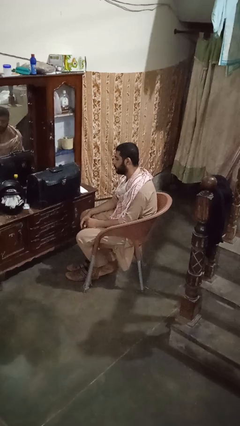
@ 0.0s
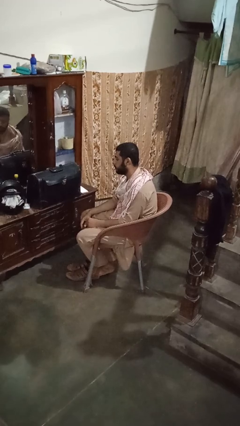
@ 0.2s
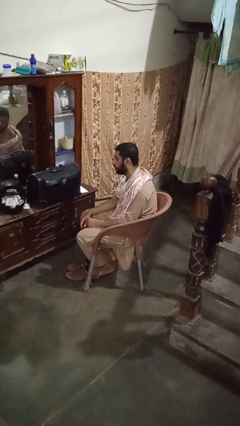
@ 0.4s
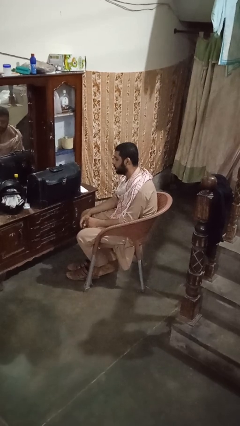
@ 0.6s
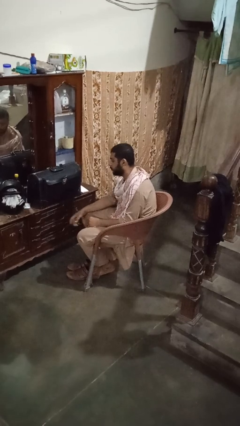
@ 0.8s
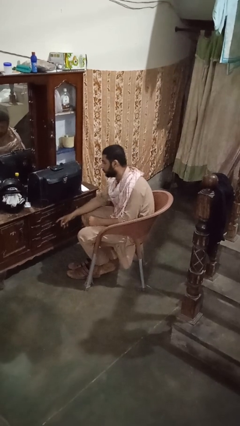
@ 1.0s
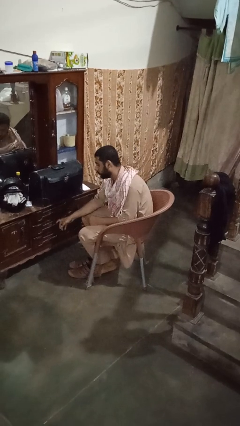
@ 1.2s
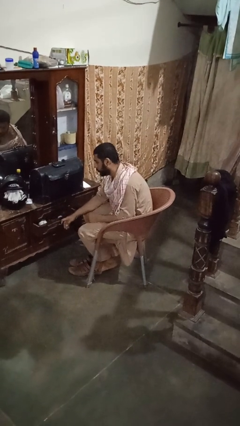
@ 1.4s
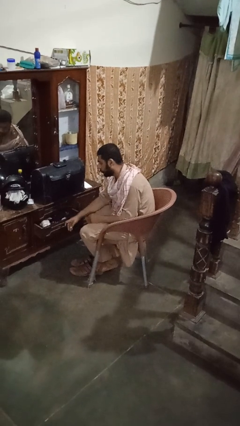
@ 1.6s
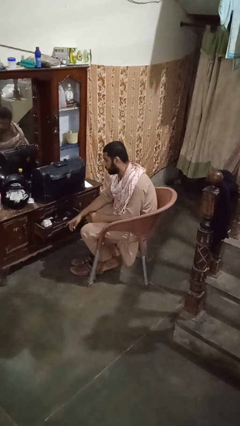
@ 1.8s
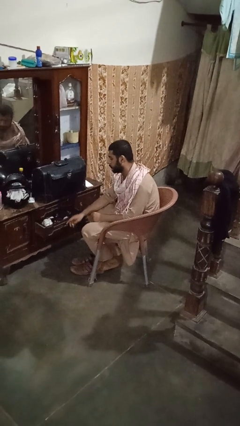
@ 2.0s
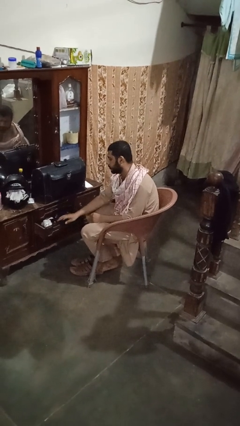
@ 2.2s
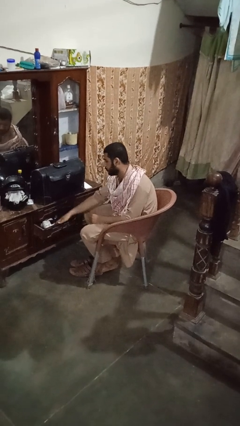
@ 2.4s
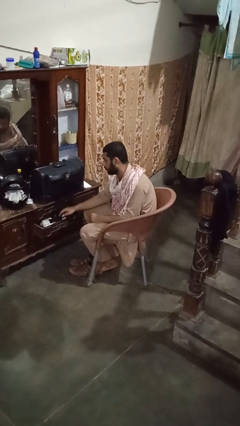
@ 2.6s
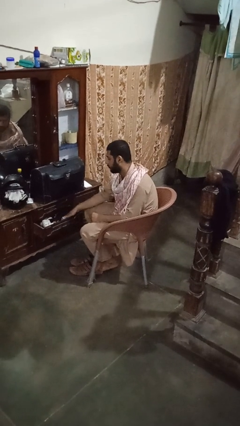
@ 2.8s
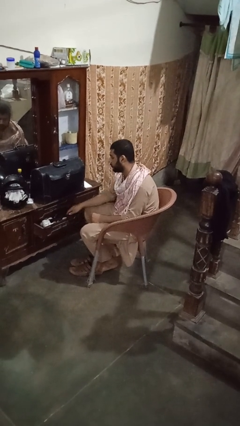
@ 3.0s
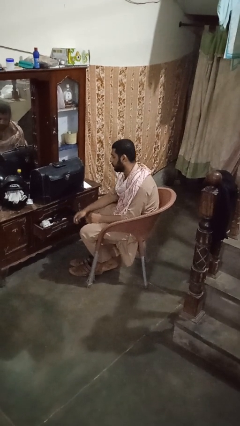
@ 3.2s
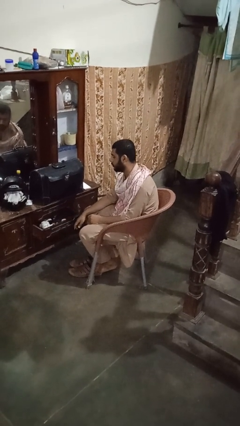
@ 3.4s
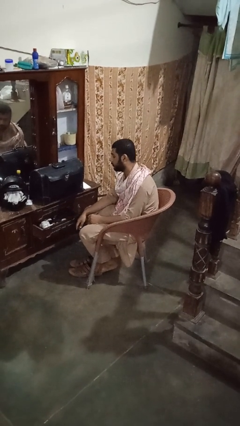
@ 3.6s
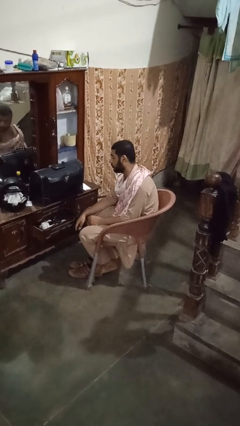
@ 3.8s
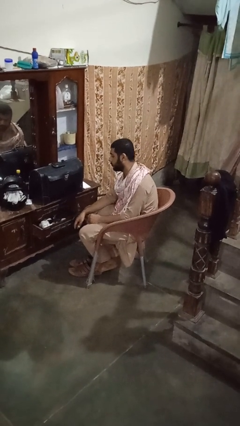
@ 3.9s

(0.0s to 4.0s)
person opens dresser drawer

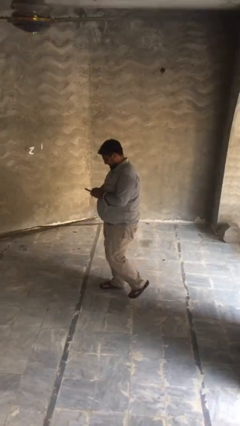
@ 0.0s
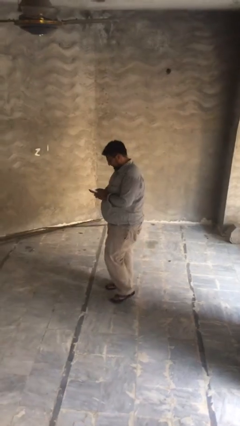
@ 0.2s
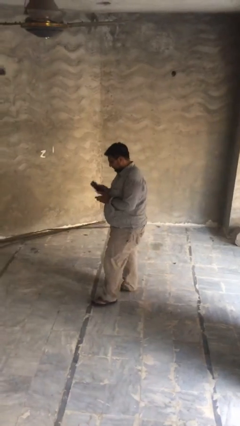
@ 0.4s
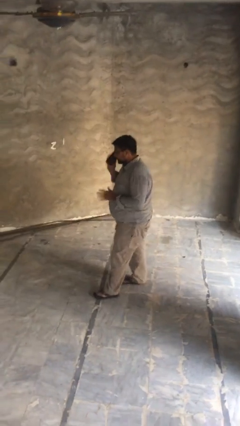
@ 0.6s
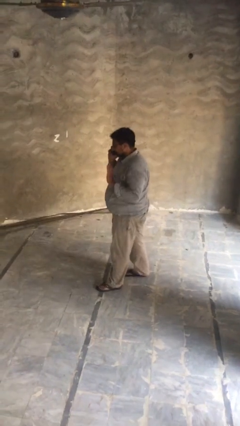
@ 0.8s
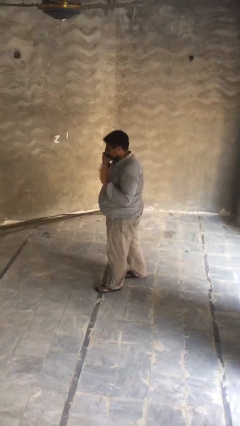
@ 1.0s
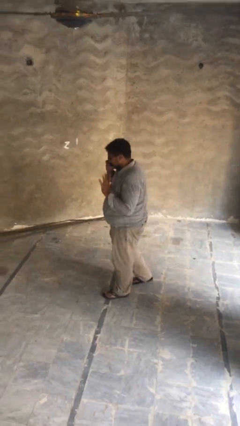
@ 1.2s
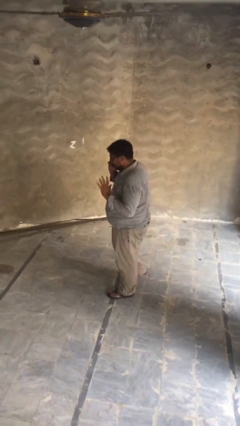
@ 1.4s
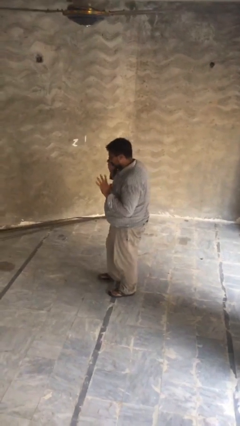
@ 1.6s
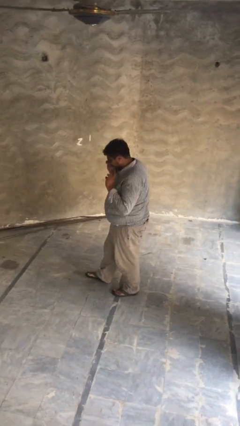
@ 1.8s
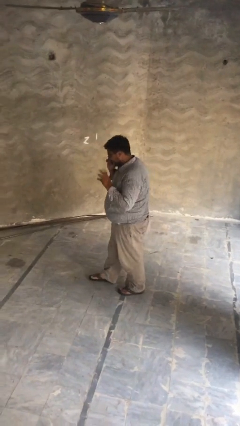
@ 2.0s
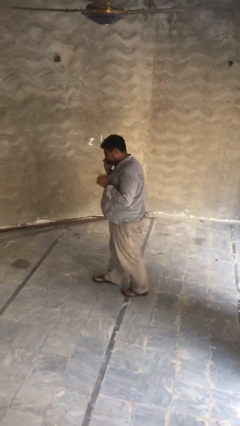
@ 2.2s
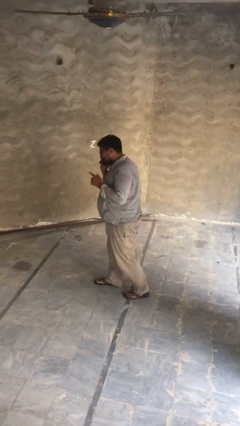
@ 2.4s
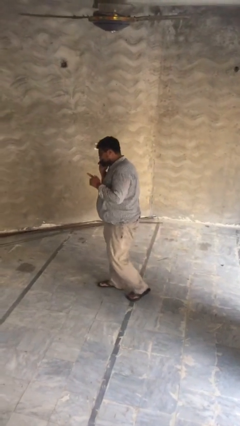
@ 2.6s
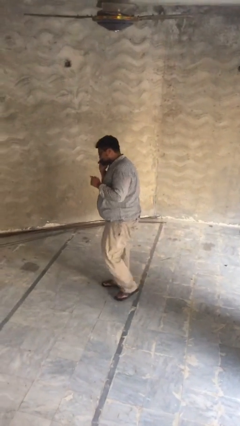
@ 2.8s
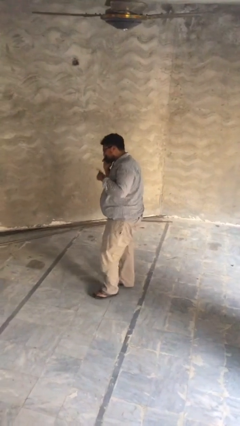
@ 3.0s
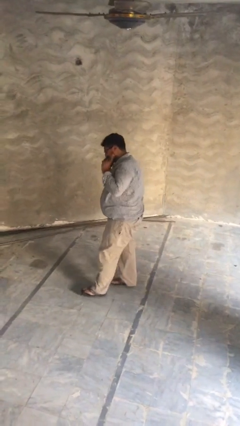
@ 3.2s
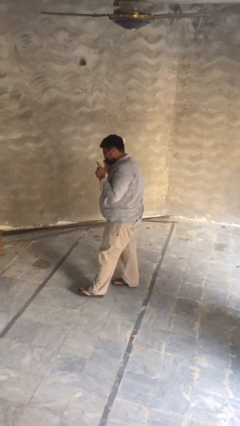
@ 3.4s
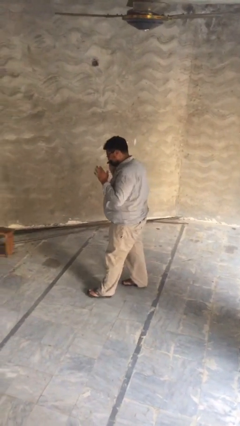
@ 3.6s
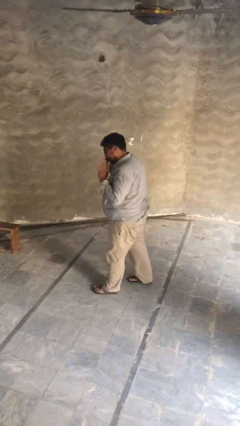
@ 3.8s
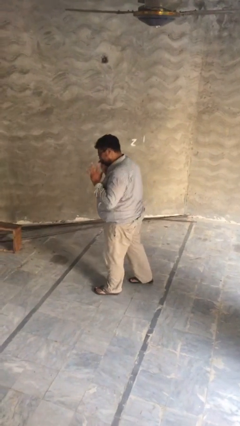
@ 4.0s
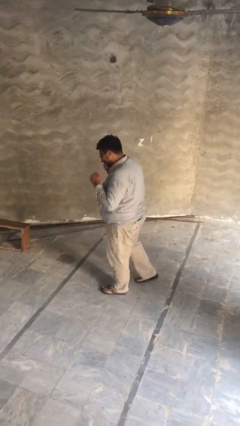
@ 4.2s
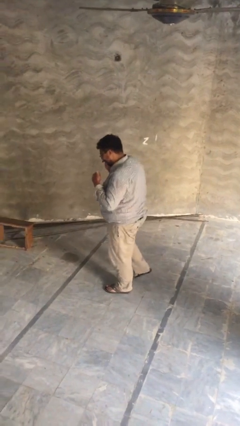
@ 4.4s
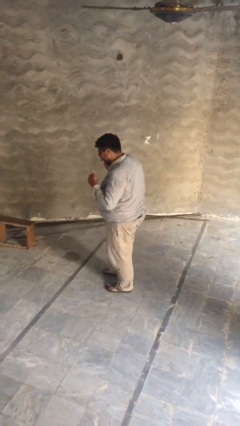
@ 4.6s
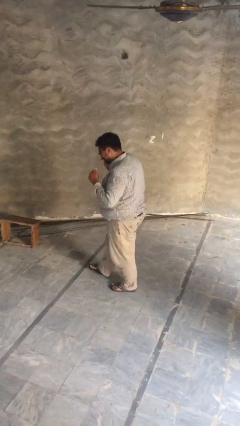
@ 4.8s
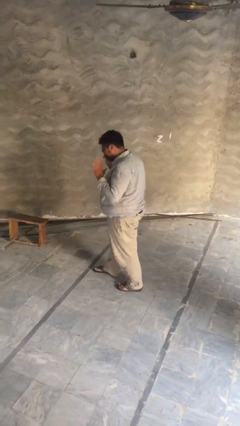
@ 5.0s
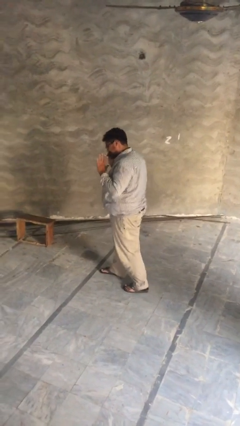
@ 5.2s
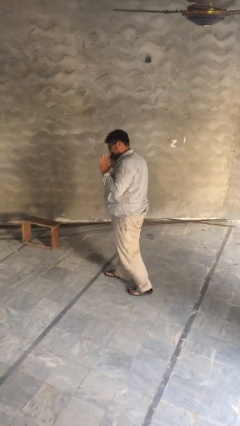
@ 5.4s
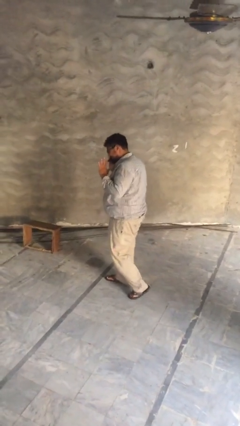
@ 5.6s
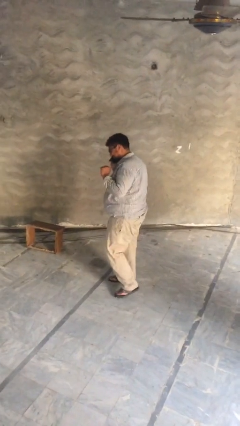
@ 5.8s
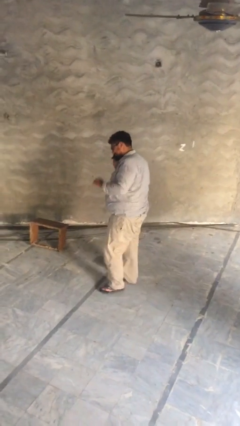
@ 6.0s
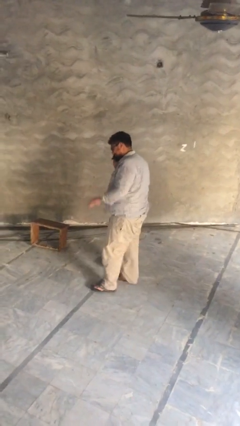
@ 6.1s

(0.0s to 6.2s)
person talks on phone

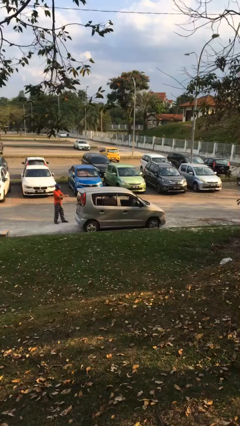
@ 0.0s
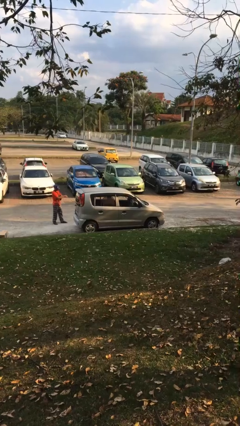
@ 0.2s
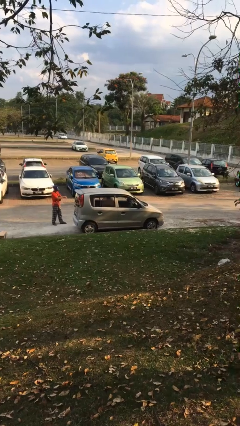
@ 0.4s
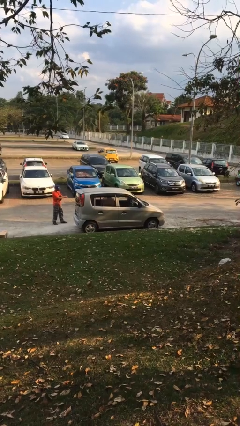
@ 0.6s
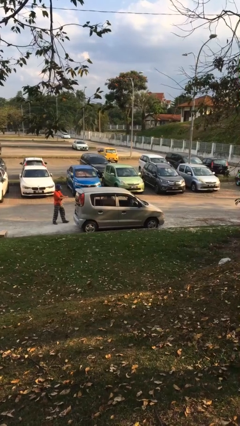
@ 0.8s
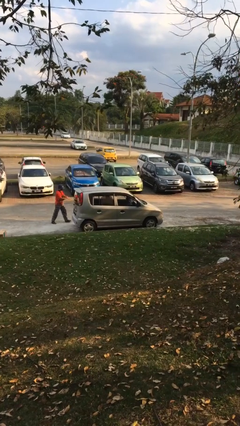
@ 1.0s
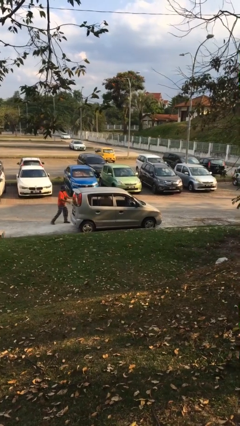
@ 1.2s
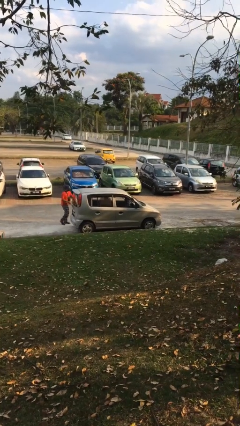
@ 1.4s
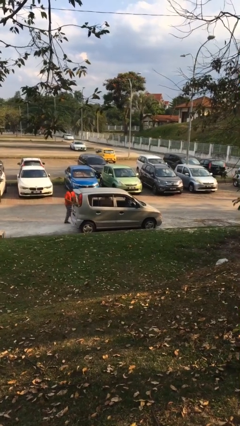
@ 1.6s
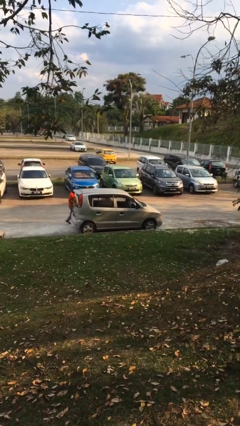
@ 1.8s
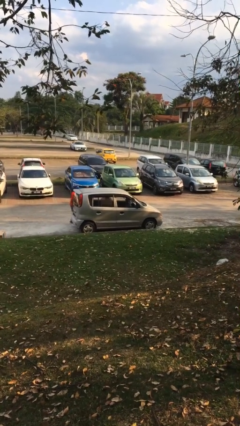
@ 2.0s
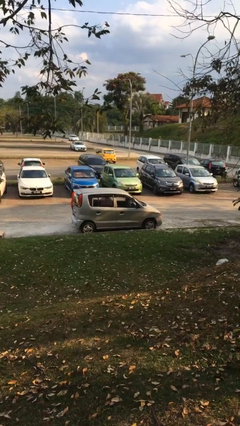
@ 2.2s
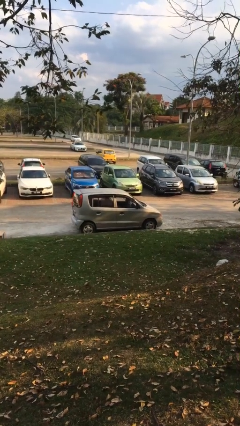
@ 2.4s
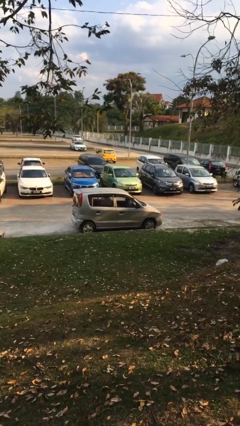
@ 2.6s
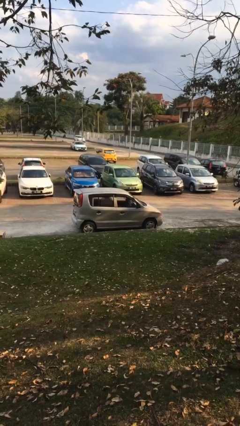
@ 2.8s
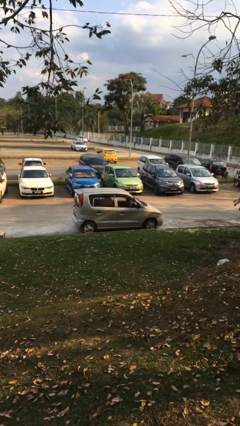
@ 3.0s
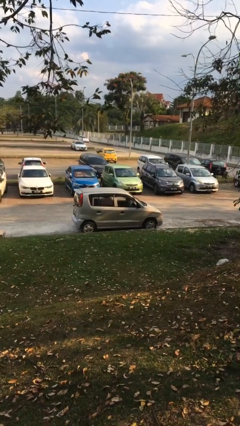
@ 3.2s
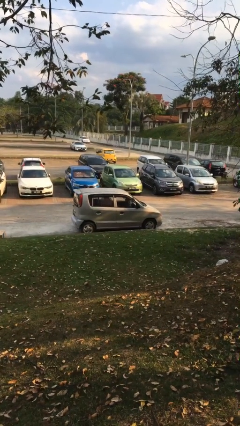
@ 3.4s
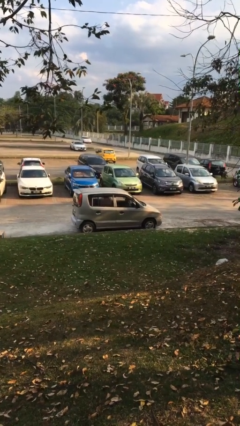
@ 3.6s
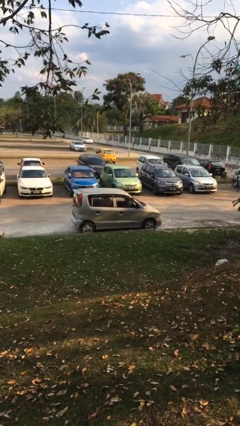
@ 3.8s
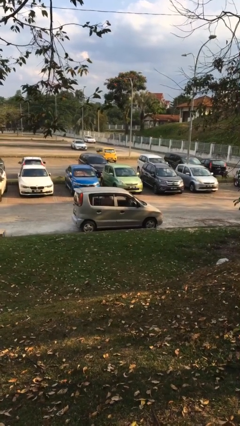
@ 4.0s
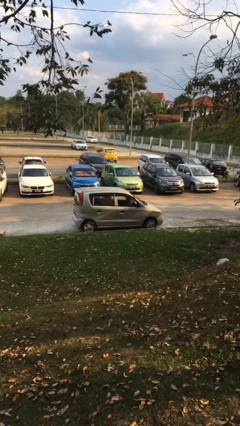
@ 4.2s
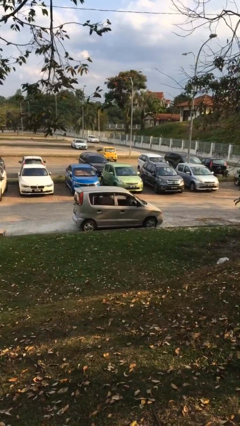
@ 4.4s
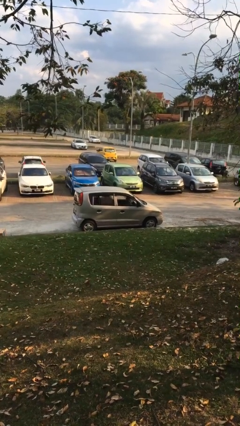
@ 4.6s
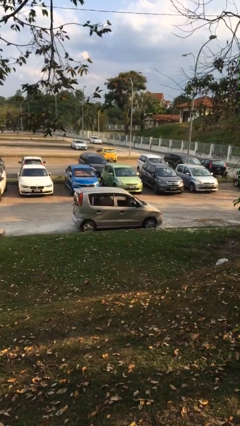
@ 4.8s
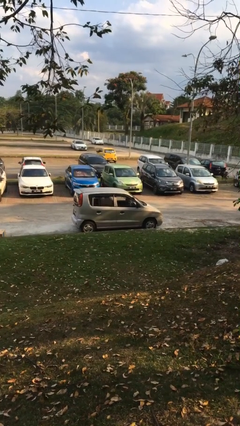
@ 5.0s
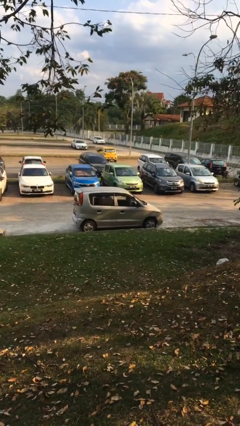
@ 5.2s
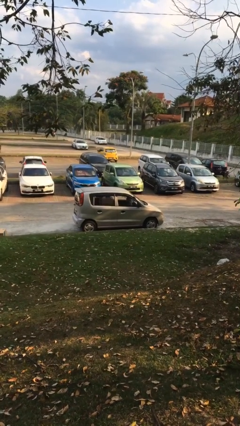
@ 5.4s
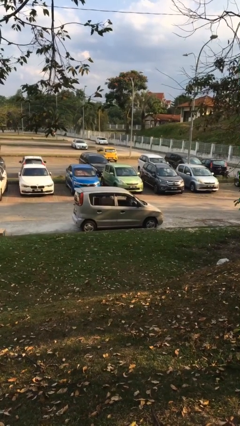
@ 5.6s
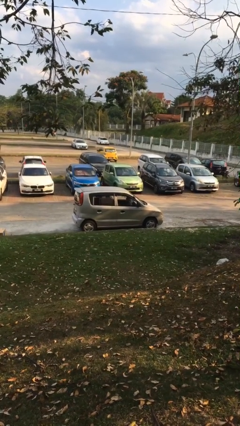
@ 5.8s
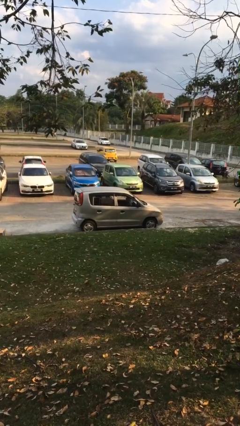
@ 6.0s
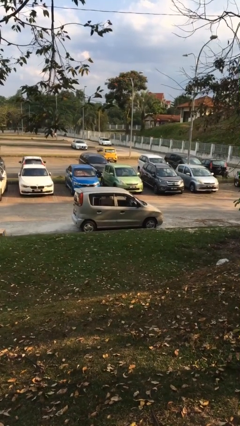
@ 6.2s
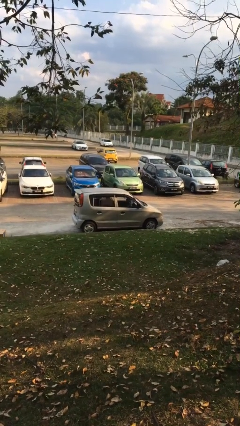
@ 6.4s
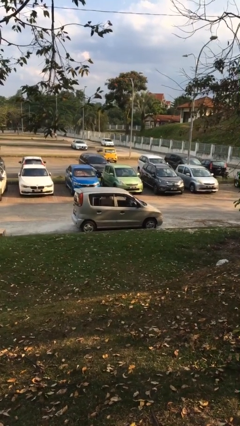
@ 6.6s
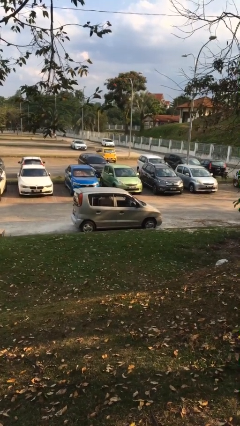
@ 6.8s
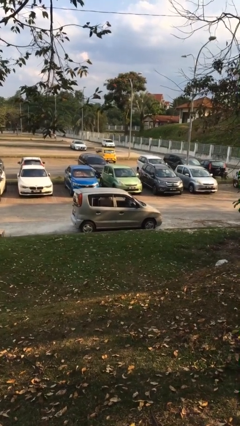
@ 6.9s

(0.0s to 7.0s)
car picks up person

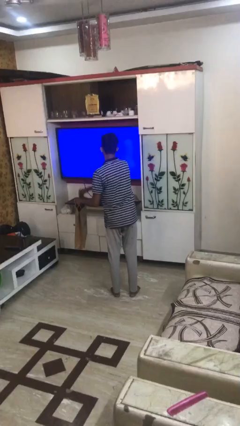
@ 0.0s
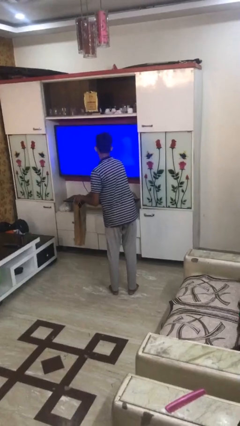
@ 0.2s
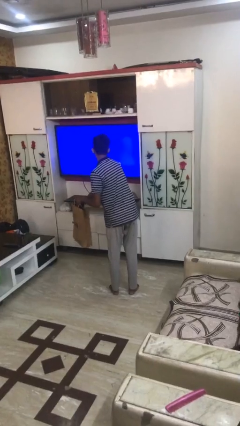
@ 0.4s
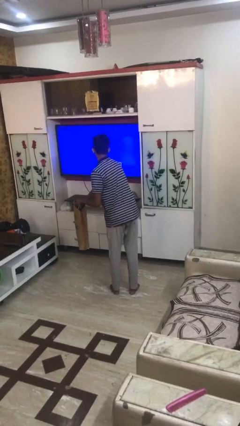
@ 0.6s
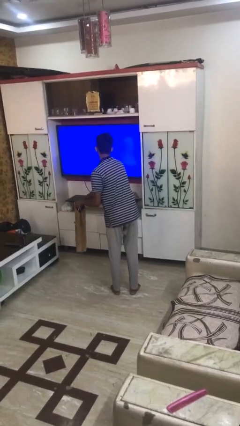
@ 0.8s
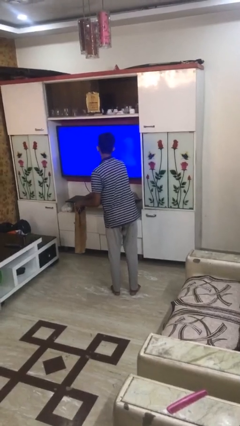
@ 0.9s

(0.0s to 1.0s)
person puts object into bag
